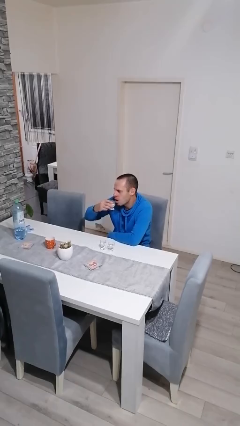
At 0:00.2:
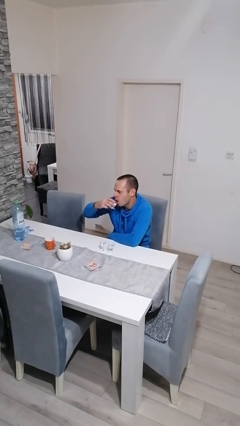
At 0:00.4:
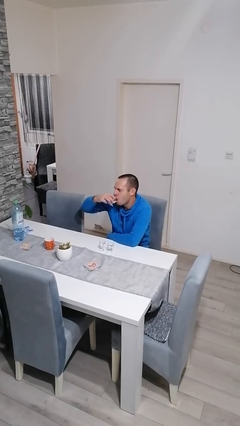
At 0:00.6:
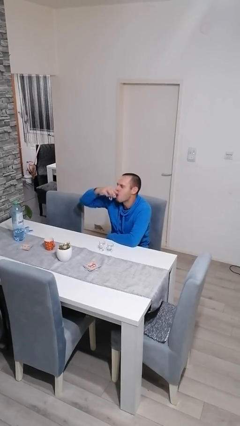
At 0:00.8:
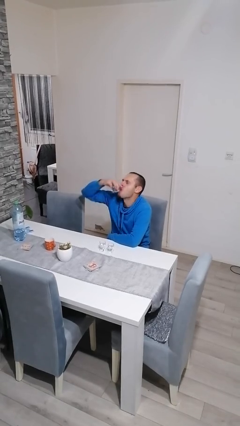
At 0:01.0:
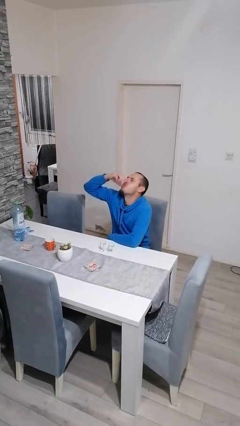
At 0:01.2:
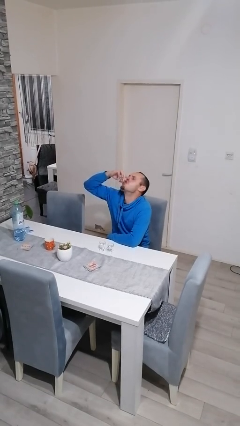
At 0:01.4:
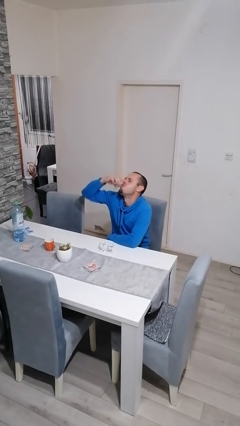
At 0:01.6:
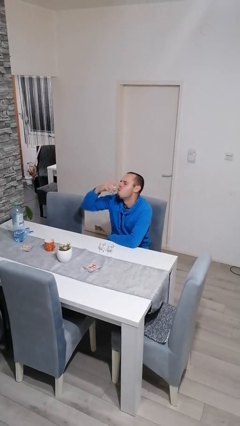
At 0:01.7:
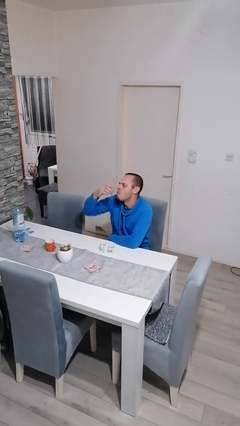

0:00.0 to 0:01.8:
person drinks from shotglass

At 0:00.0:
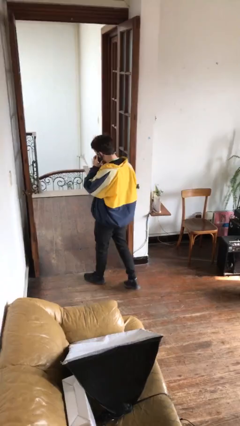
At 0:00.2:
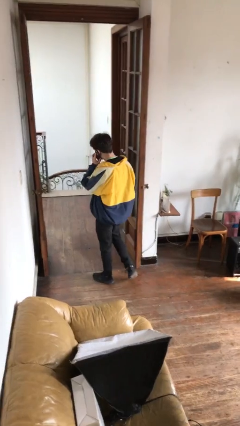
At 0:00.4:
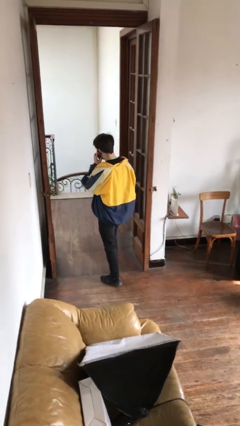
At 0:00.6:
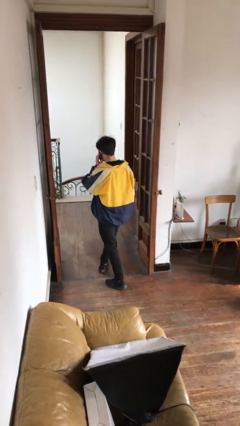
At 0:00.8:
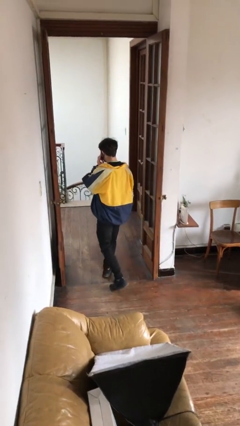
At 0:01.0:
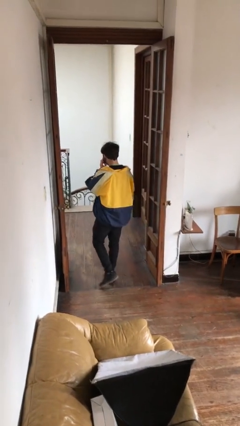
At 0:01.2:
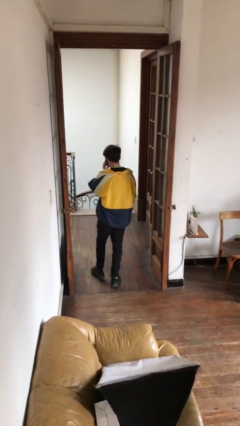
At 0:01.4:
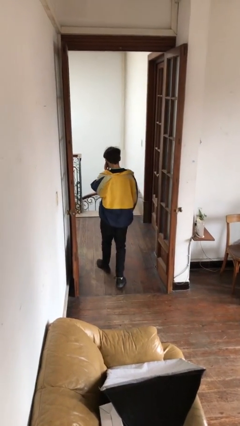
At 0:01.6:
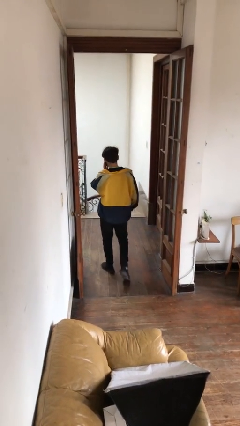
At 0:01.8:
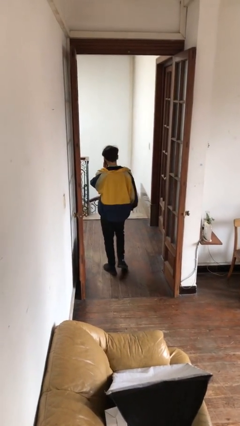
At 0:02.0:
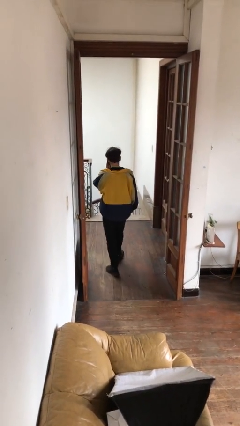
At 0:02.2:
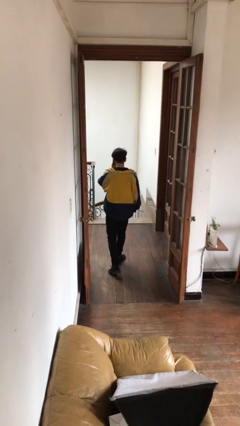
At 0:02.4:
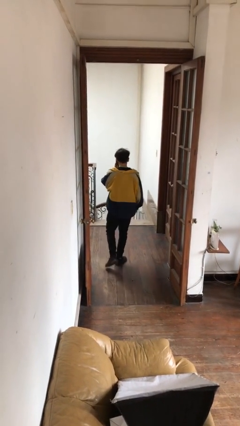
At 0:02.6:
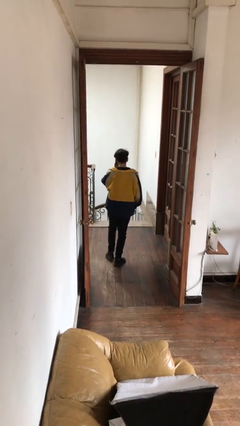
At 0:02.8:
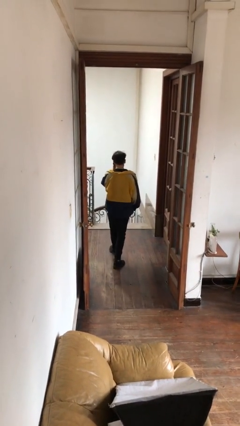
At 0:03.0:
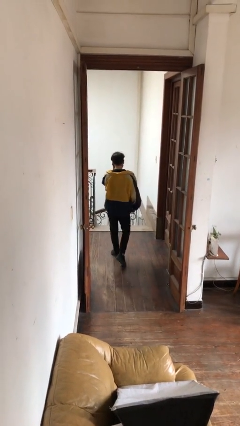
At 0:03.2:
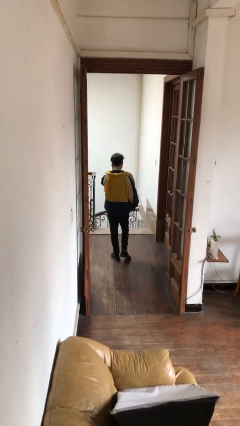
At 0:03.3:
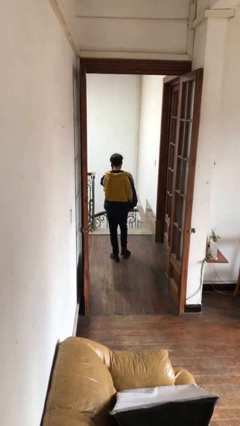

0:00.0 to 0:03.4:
person exits scene through structure

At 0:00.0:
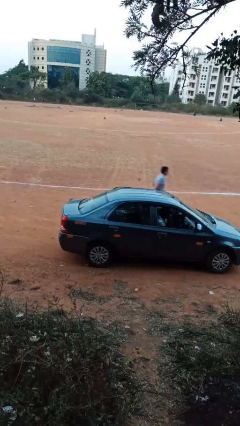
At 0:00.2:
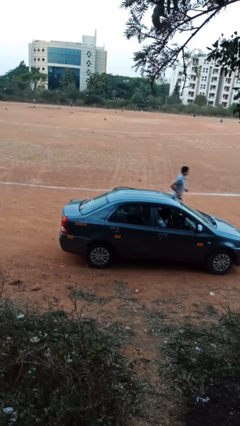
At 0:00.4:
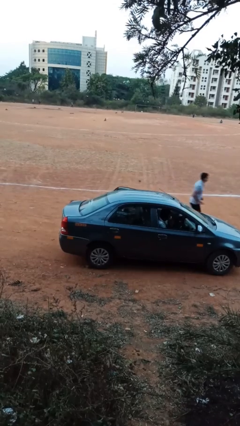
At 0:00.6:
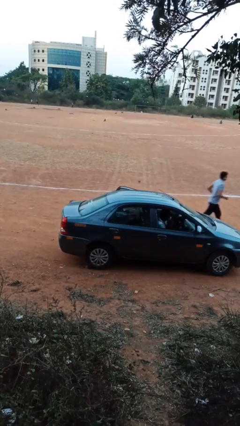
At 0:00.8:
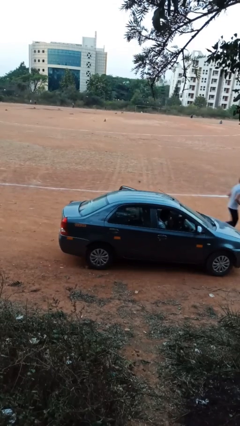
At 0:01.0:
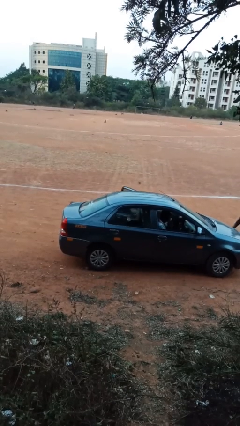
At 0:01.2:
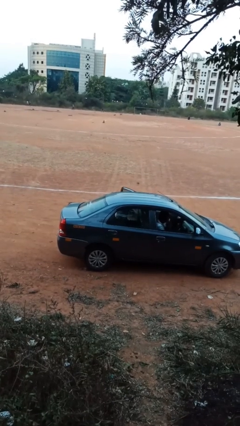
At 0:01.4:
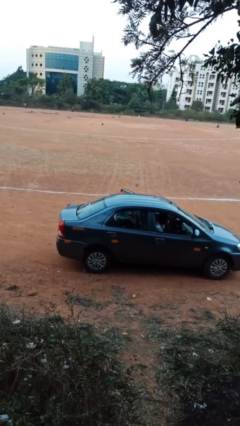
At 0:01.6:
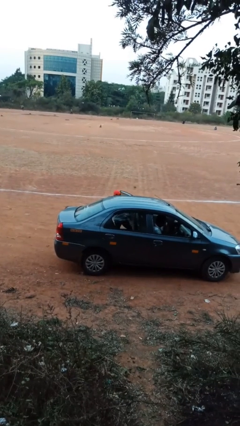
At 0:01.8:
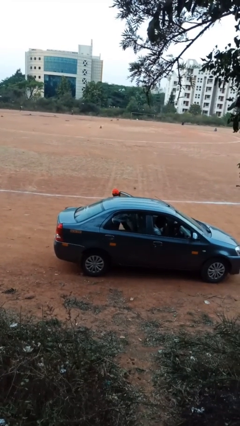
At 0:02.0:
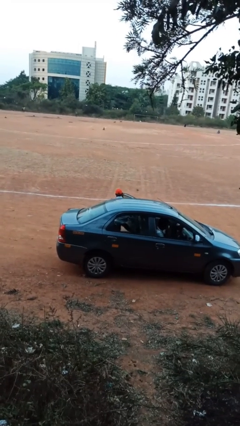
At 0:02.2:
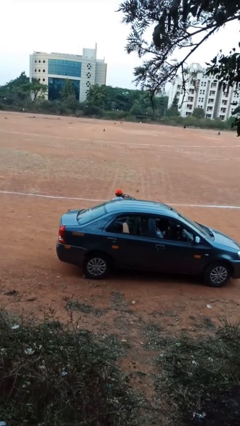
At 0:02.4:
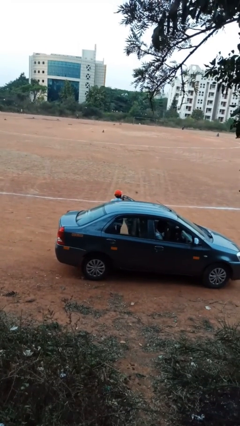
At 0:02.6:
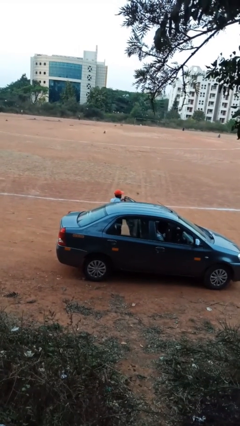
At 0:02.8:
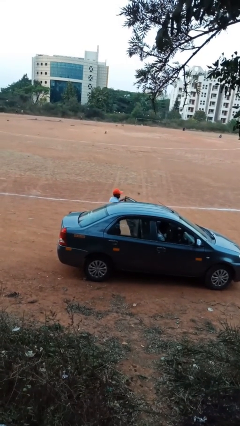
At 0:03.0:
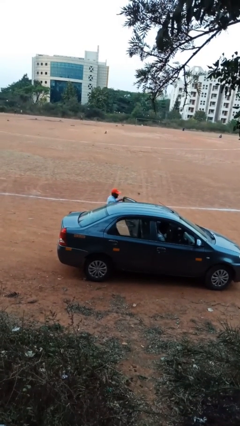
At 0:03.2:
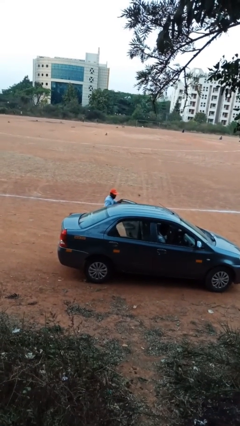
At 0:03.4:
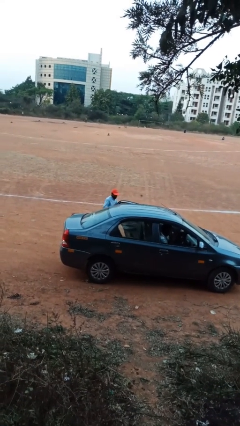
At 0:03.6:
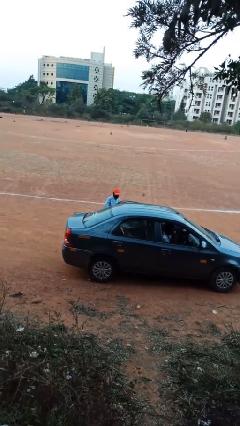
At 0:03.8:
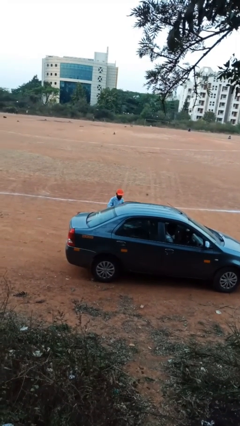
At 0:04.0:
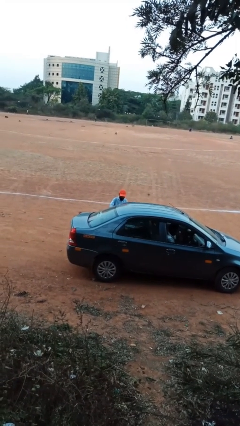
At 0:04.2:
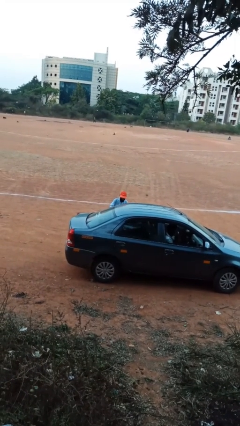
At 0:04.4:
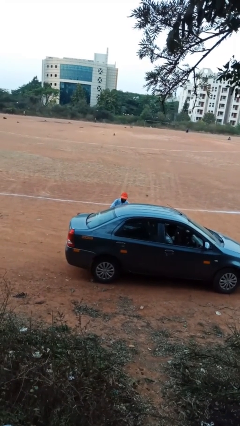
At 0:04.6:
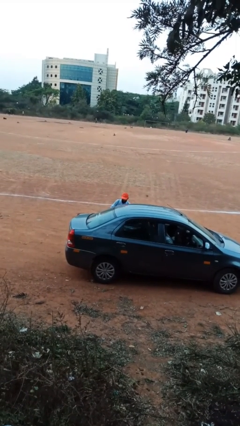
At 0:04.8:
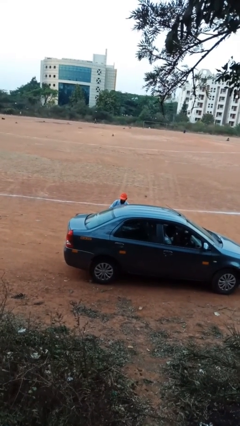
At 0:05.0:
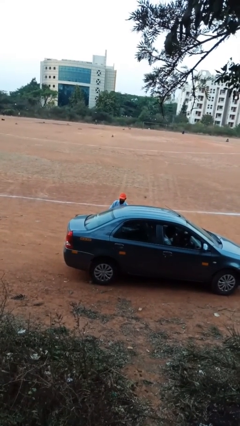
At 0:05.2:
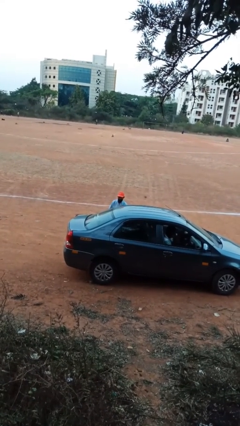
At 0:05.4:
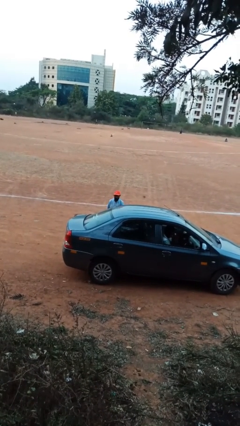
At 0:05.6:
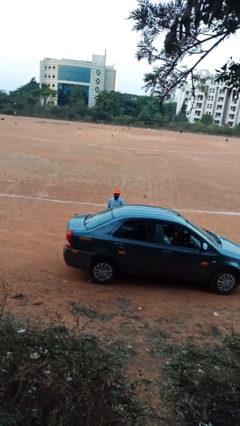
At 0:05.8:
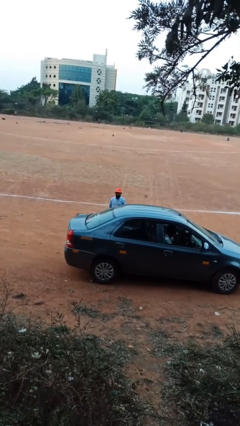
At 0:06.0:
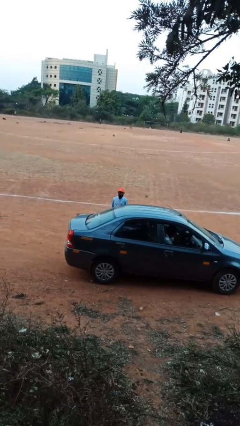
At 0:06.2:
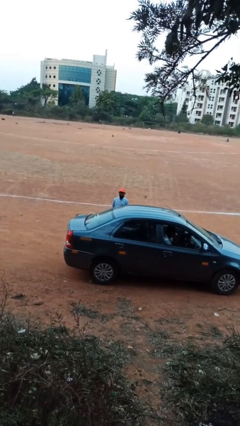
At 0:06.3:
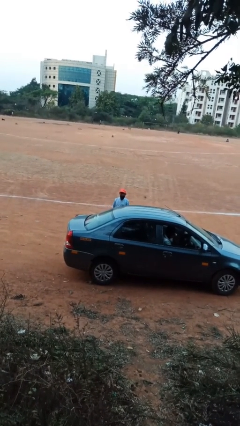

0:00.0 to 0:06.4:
person exits car

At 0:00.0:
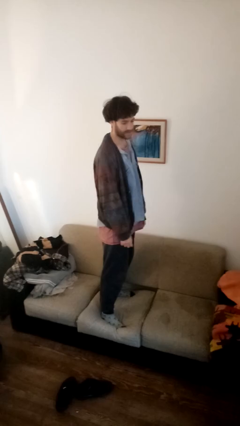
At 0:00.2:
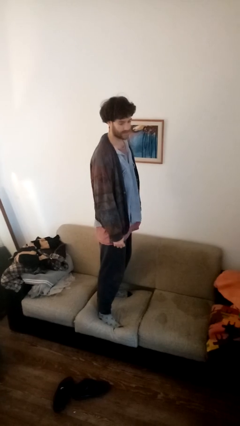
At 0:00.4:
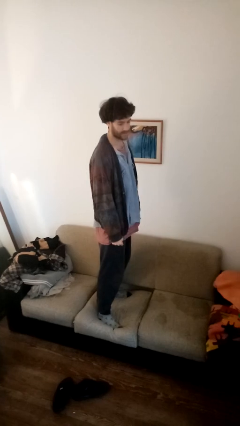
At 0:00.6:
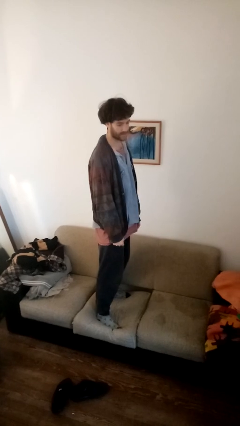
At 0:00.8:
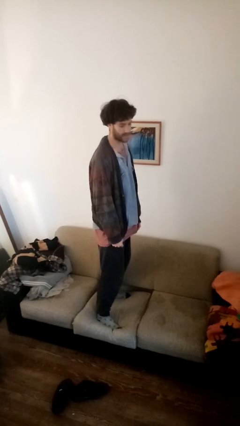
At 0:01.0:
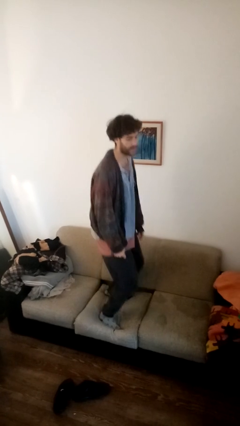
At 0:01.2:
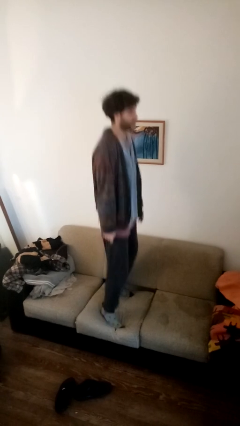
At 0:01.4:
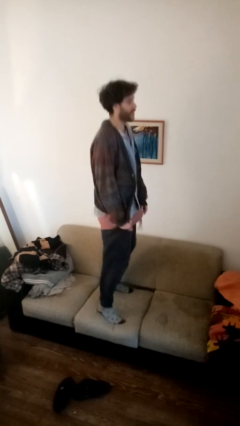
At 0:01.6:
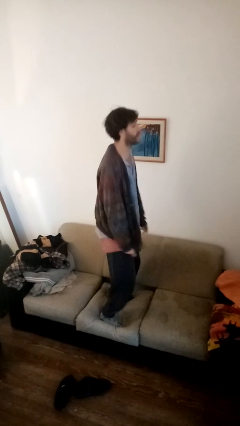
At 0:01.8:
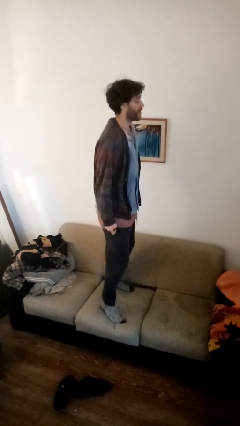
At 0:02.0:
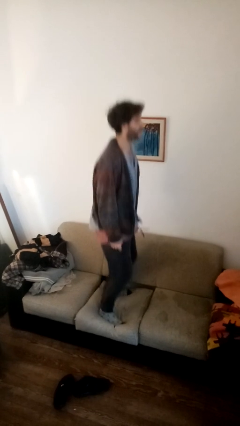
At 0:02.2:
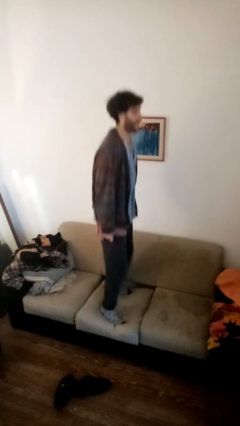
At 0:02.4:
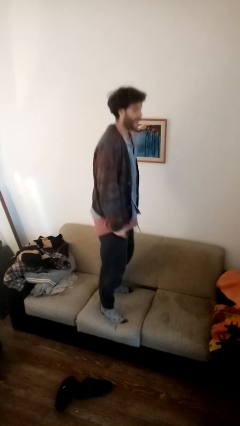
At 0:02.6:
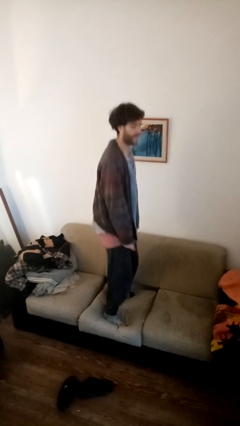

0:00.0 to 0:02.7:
person jumps on couch

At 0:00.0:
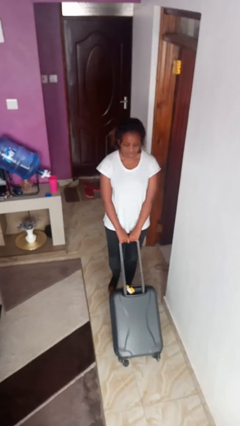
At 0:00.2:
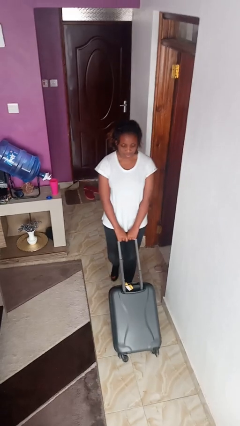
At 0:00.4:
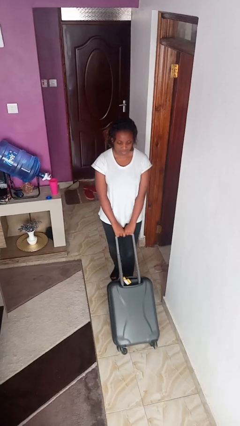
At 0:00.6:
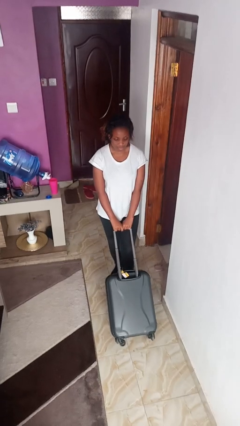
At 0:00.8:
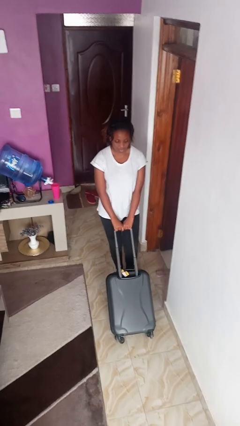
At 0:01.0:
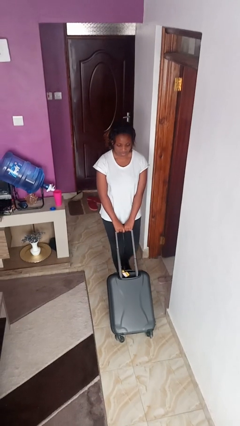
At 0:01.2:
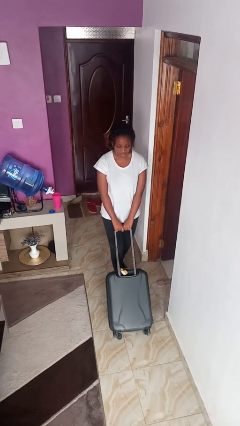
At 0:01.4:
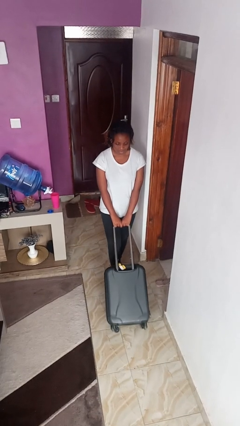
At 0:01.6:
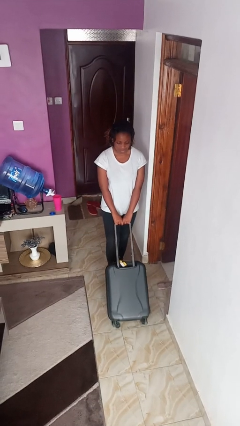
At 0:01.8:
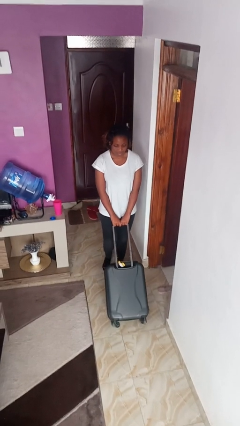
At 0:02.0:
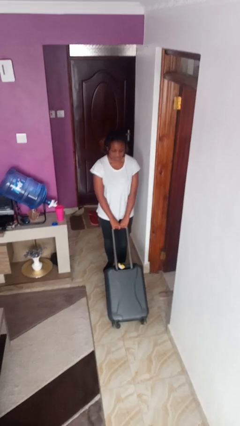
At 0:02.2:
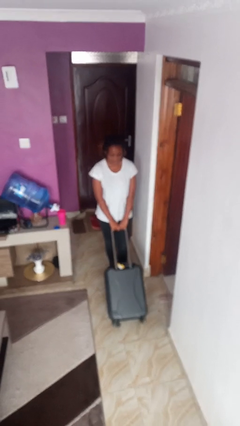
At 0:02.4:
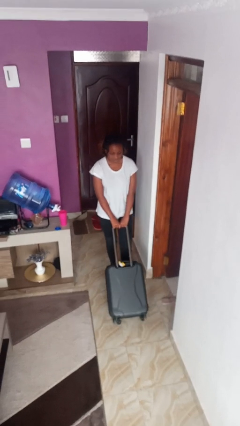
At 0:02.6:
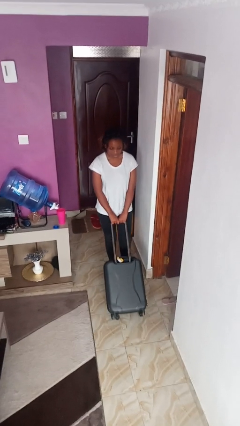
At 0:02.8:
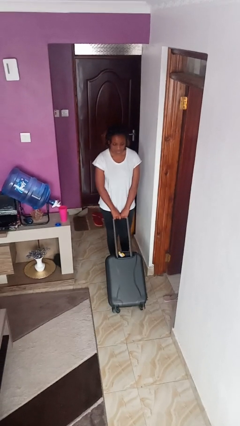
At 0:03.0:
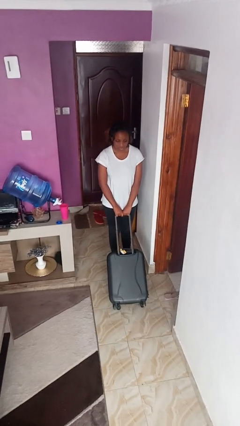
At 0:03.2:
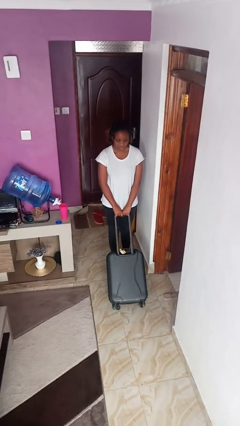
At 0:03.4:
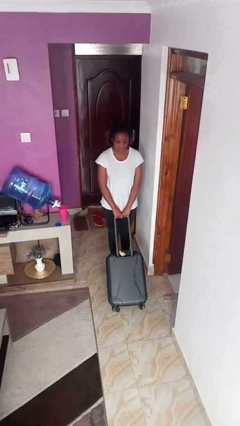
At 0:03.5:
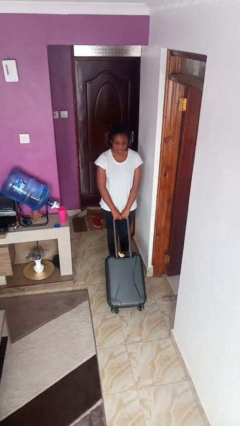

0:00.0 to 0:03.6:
person pulls wheeled cart
